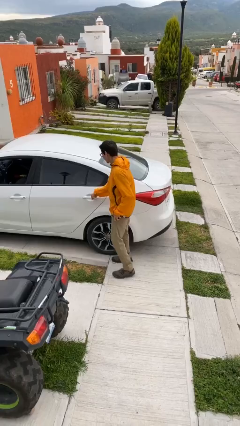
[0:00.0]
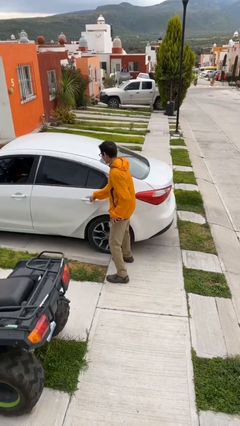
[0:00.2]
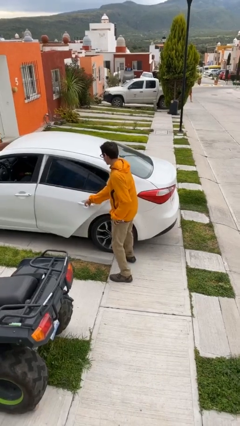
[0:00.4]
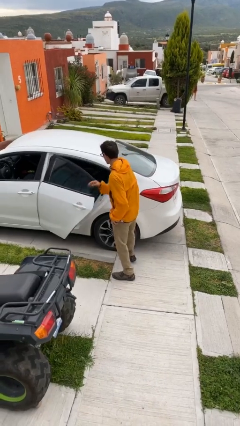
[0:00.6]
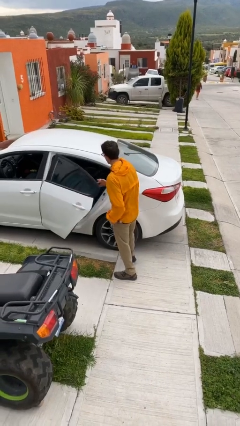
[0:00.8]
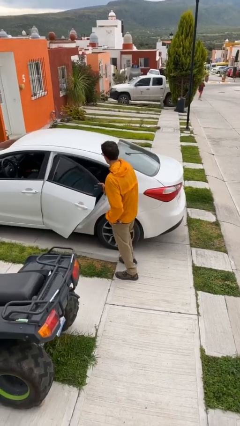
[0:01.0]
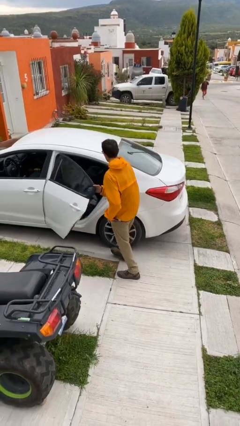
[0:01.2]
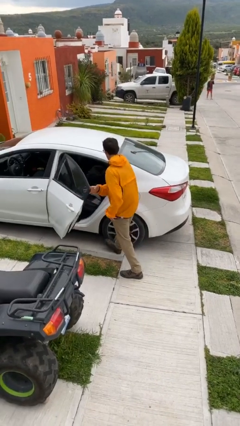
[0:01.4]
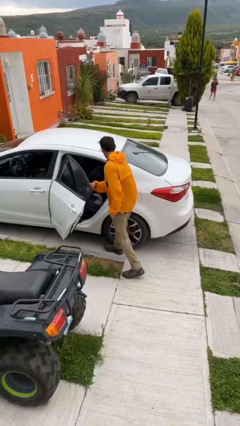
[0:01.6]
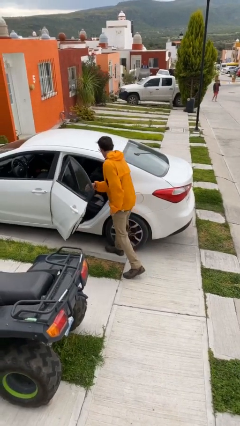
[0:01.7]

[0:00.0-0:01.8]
person opens car door

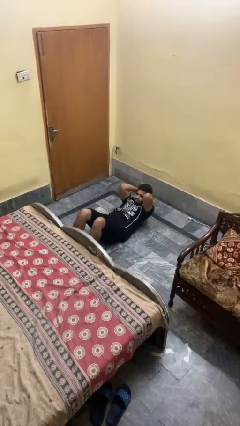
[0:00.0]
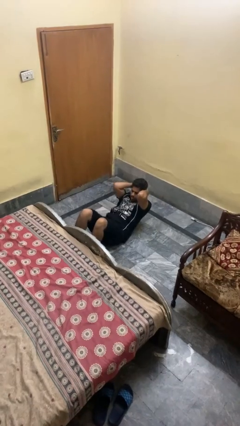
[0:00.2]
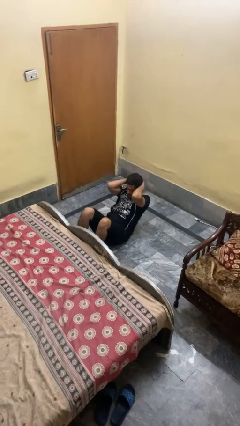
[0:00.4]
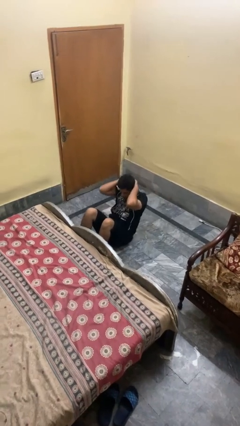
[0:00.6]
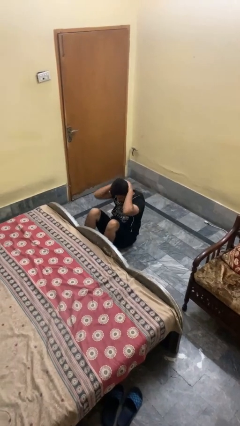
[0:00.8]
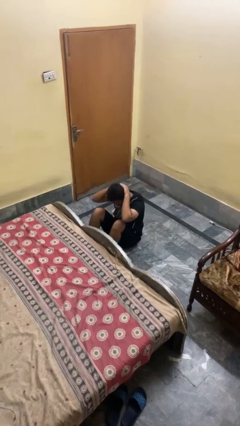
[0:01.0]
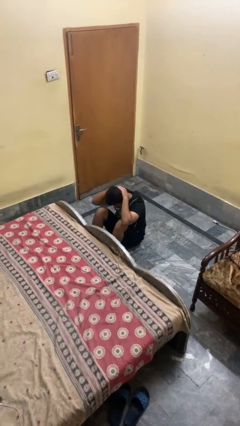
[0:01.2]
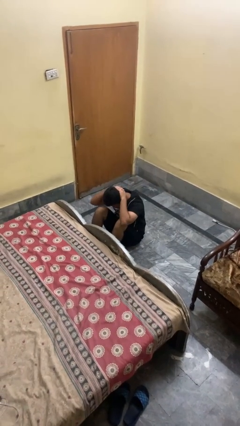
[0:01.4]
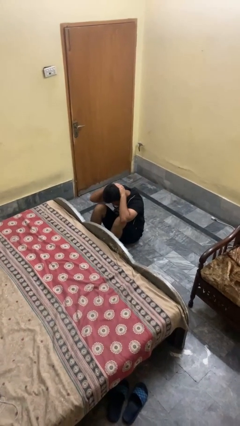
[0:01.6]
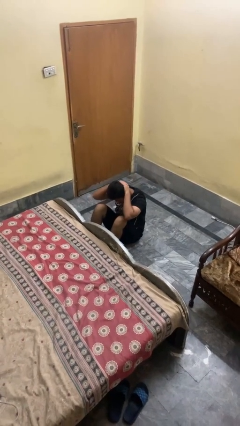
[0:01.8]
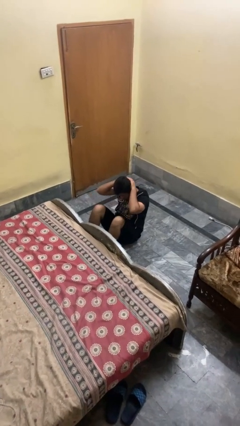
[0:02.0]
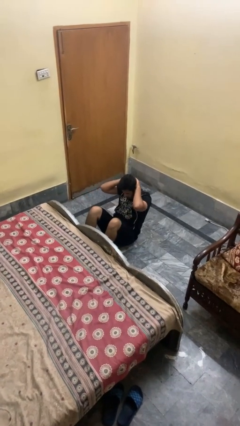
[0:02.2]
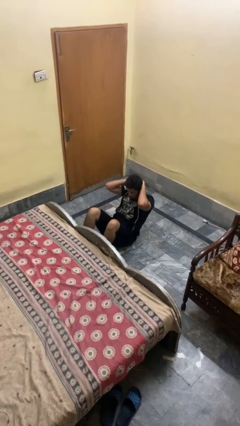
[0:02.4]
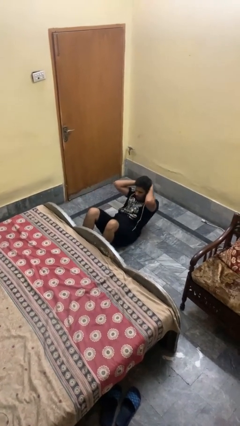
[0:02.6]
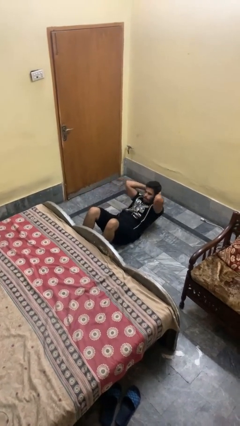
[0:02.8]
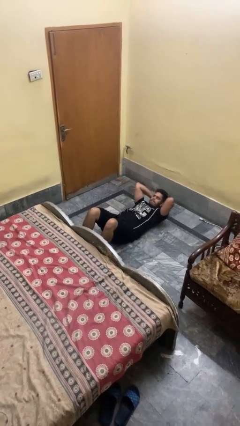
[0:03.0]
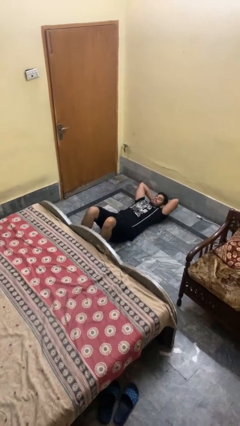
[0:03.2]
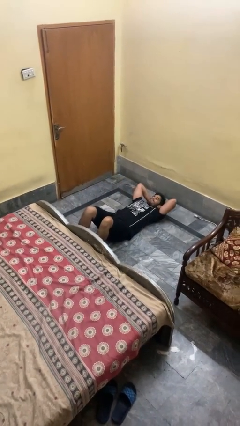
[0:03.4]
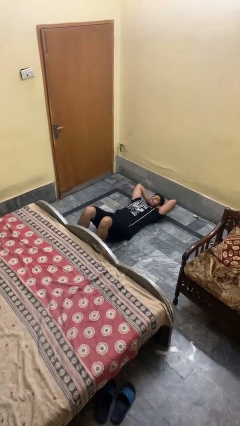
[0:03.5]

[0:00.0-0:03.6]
person exercises with situp

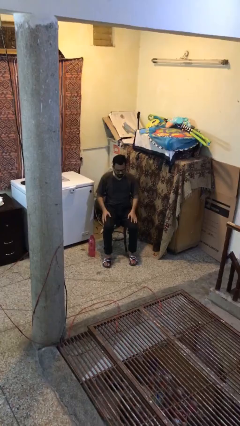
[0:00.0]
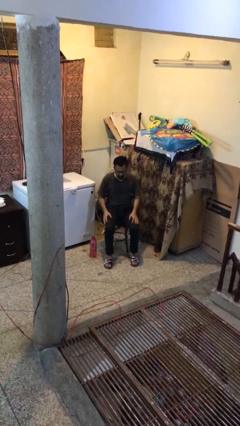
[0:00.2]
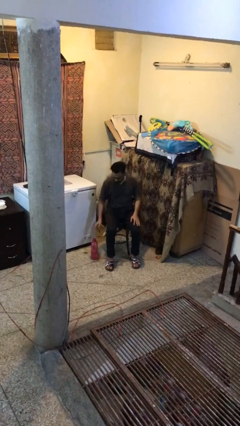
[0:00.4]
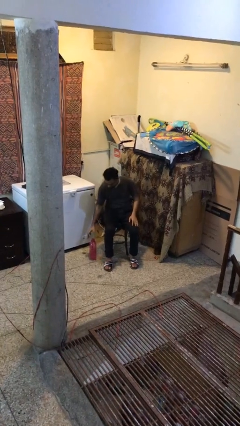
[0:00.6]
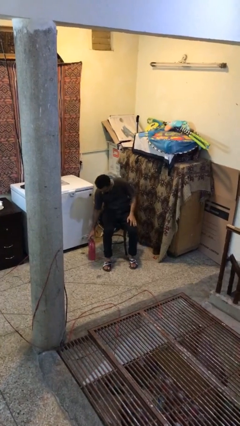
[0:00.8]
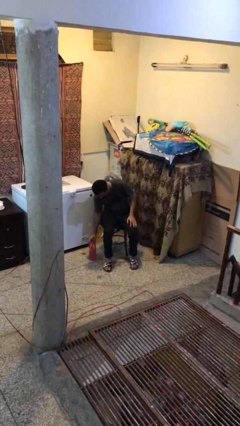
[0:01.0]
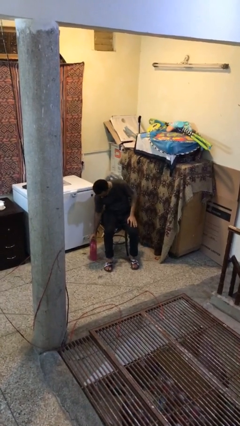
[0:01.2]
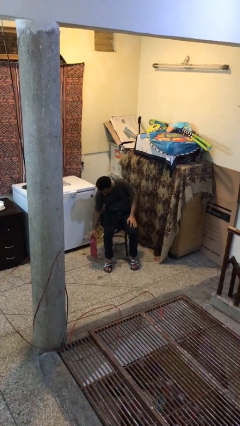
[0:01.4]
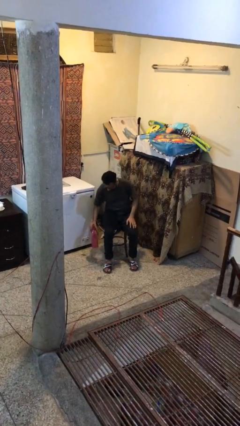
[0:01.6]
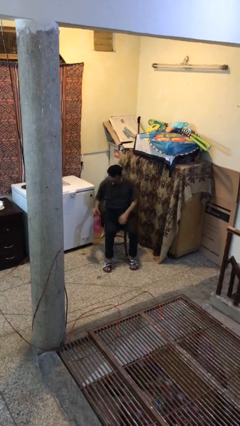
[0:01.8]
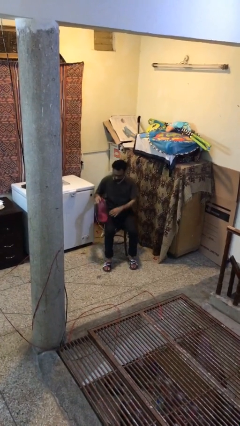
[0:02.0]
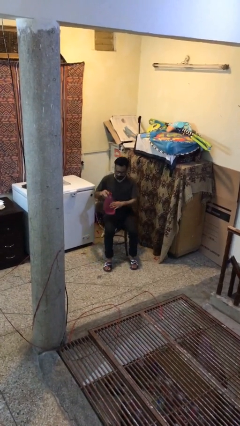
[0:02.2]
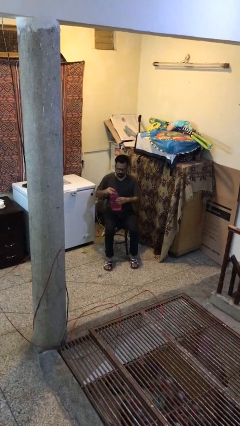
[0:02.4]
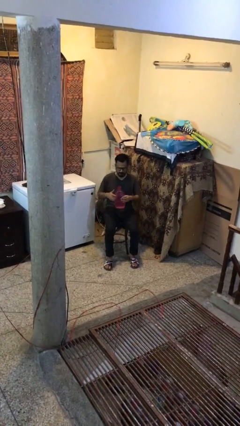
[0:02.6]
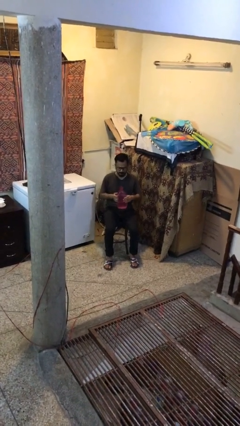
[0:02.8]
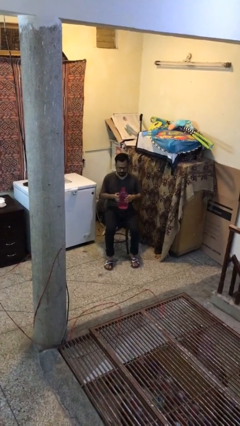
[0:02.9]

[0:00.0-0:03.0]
person picks up object from floor

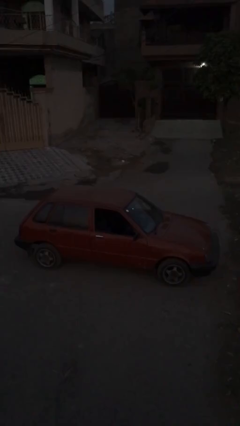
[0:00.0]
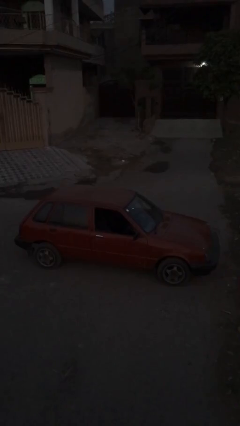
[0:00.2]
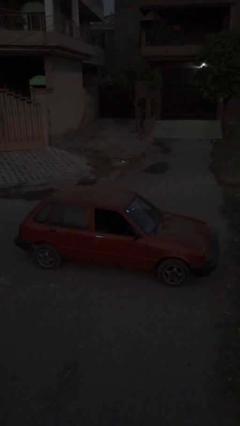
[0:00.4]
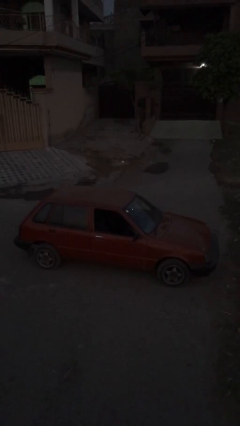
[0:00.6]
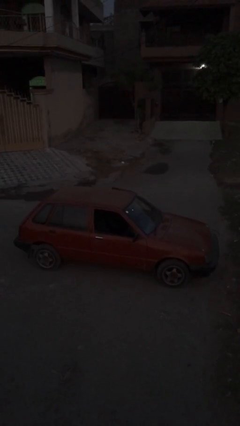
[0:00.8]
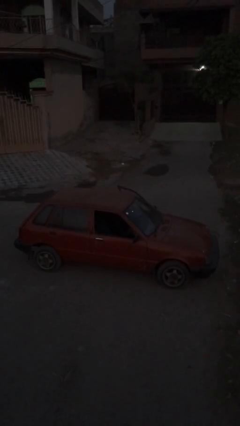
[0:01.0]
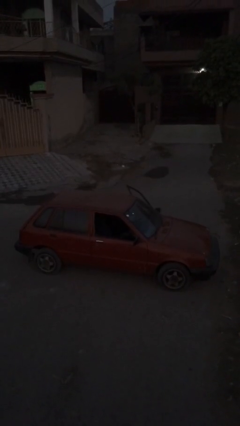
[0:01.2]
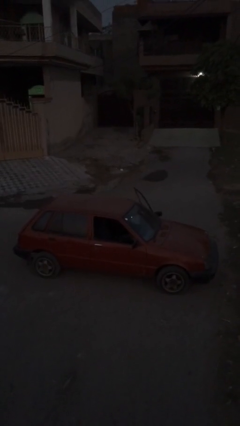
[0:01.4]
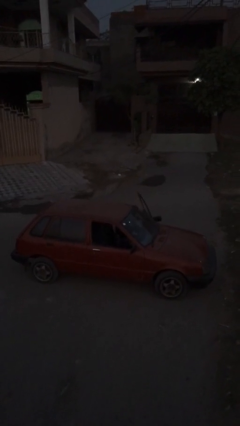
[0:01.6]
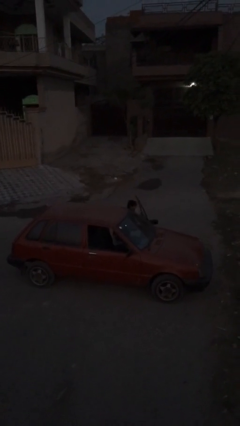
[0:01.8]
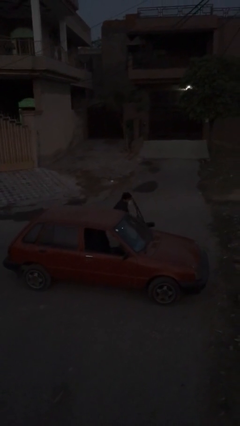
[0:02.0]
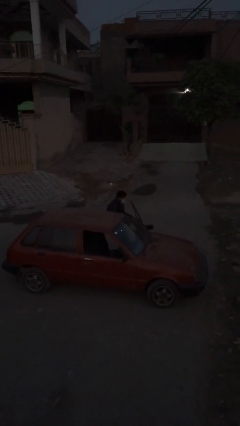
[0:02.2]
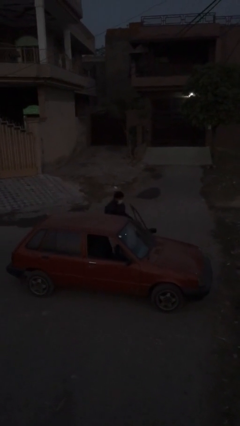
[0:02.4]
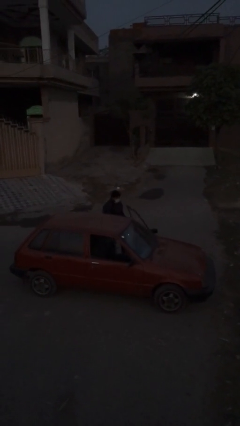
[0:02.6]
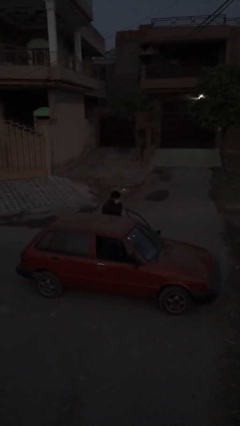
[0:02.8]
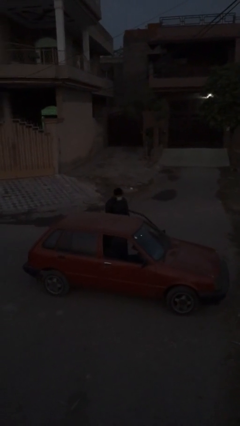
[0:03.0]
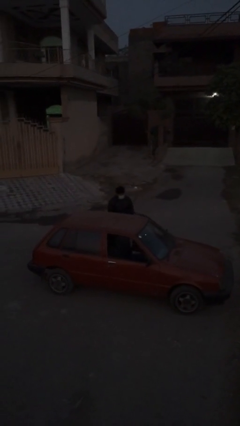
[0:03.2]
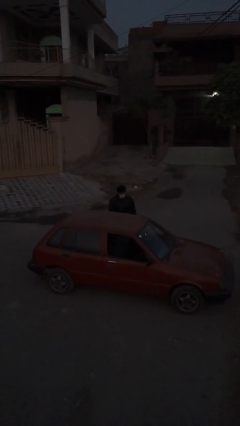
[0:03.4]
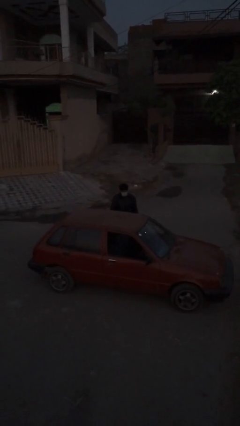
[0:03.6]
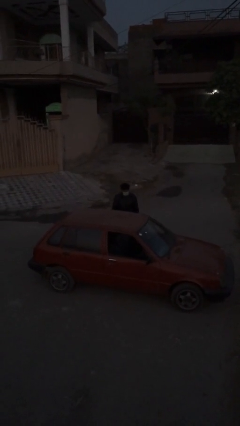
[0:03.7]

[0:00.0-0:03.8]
person exits car

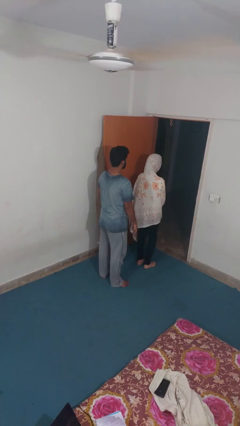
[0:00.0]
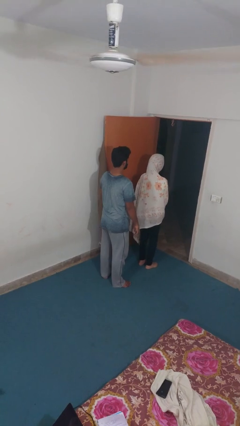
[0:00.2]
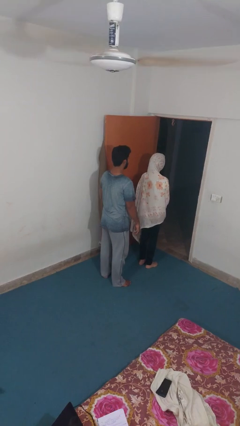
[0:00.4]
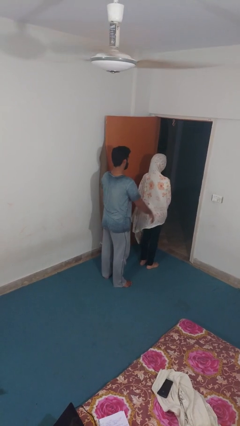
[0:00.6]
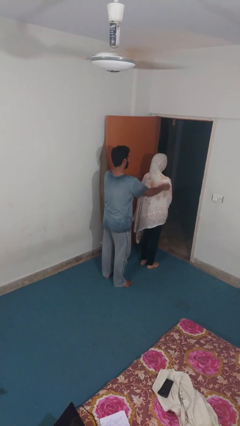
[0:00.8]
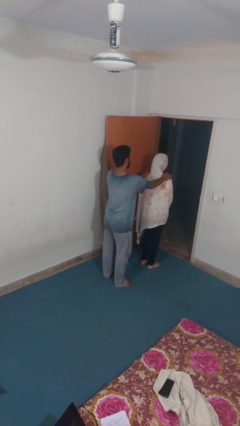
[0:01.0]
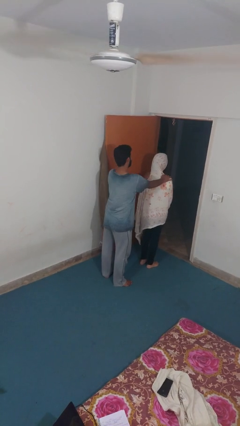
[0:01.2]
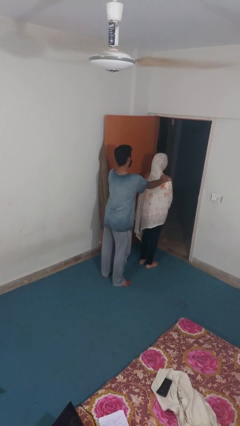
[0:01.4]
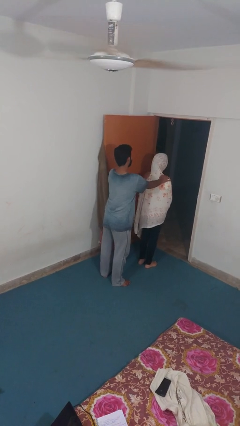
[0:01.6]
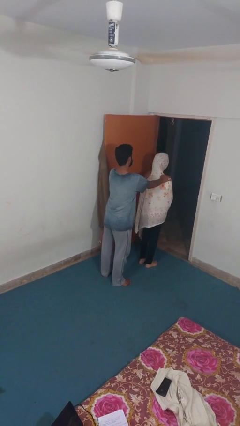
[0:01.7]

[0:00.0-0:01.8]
person grabs person by shoulder

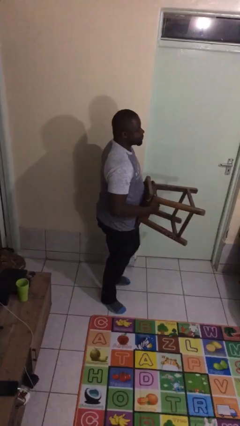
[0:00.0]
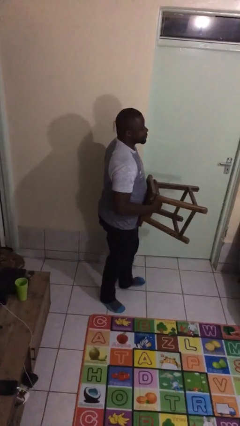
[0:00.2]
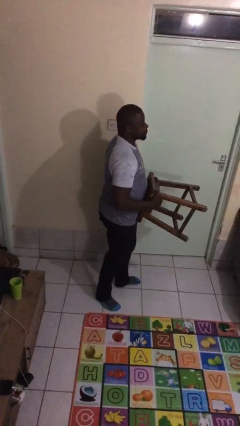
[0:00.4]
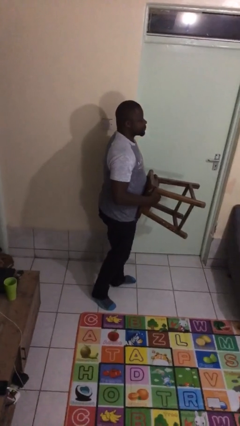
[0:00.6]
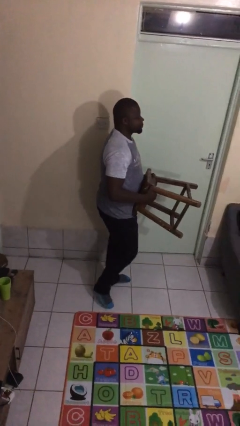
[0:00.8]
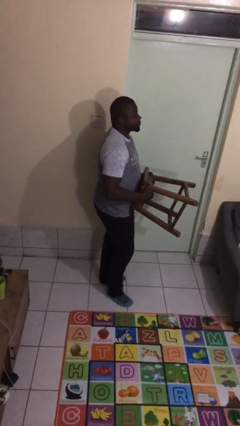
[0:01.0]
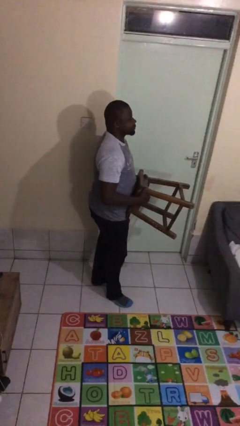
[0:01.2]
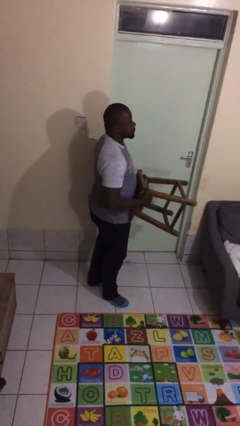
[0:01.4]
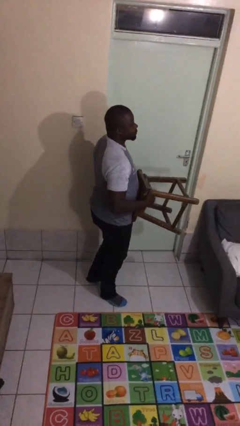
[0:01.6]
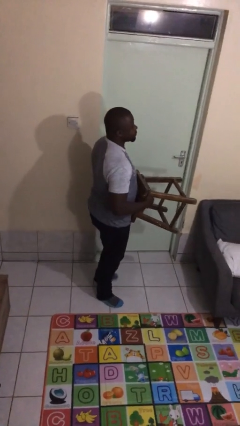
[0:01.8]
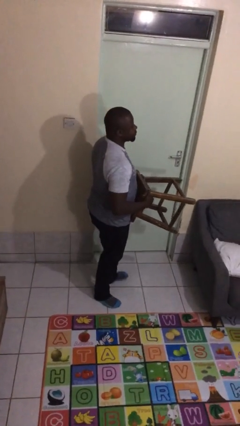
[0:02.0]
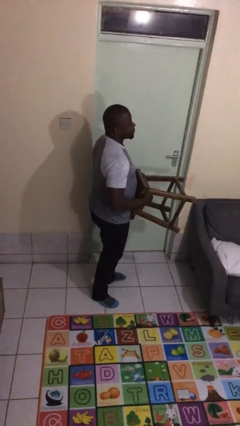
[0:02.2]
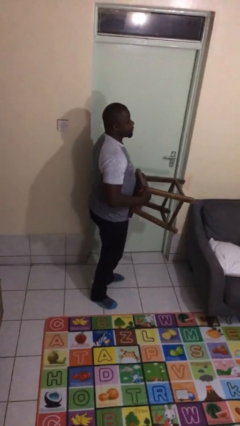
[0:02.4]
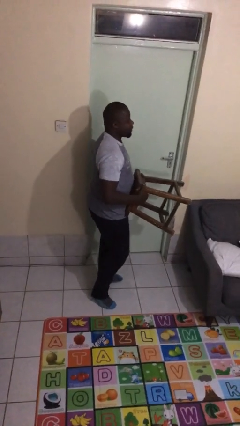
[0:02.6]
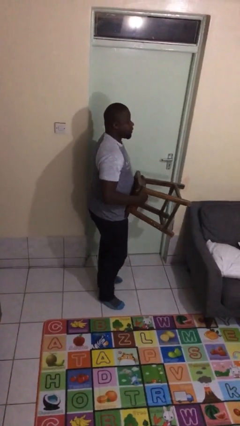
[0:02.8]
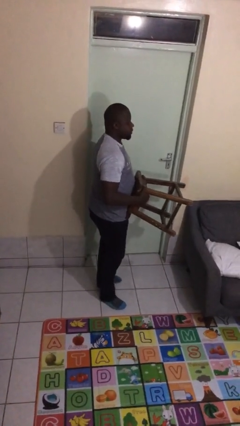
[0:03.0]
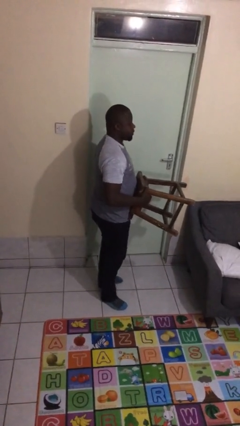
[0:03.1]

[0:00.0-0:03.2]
person carries furniture
